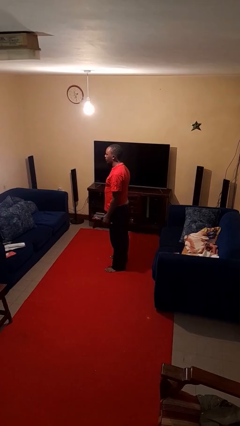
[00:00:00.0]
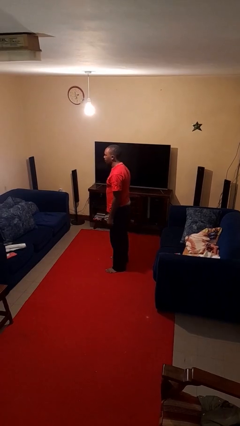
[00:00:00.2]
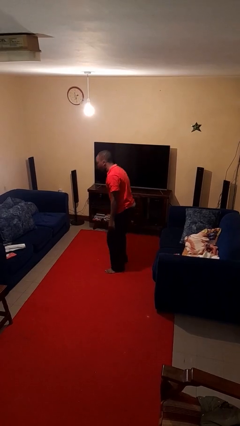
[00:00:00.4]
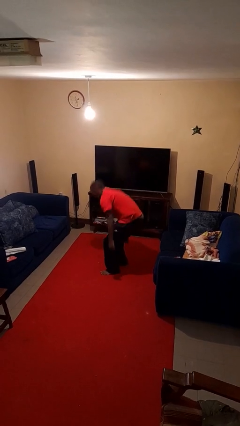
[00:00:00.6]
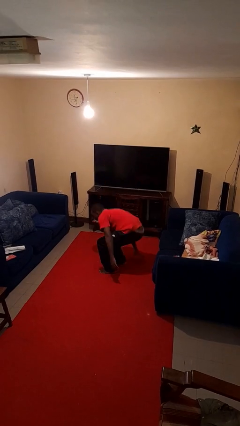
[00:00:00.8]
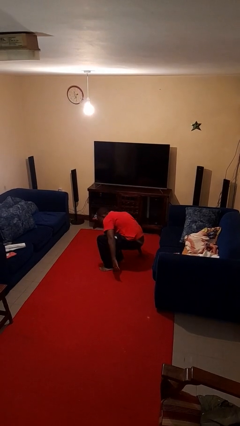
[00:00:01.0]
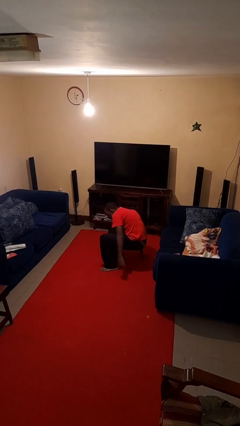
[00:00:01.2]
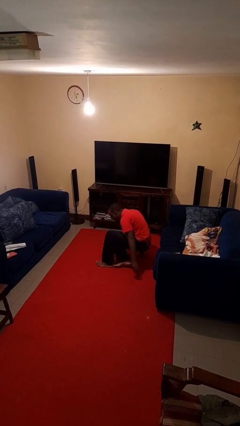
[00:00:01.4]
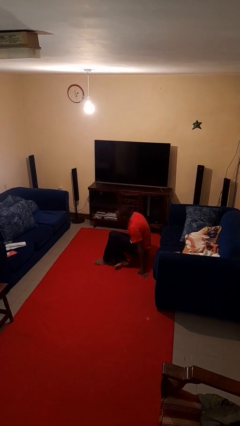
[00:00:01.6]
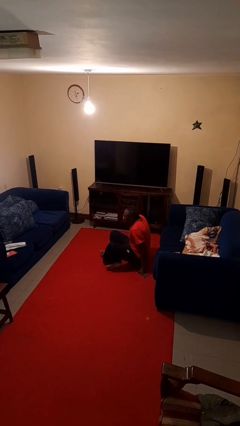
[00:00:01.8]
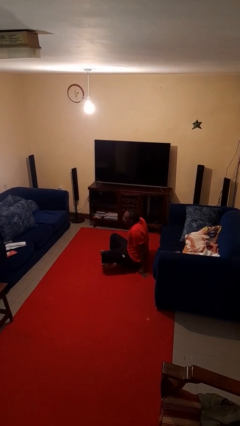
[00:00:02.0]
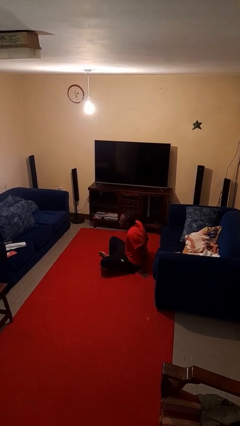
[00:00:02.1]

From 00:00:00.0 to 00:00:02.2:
person sits crisscross

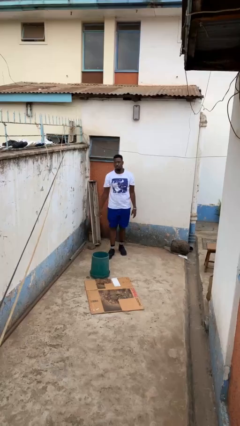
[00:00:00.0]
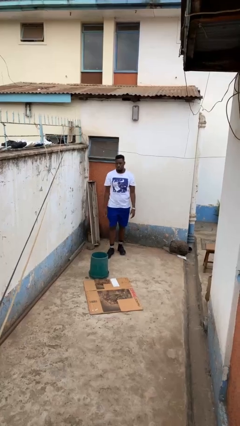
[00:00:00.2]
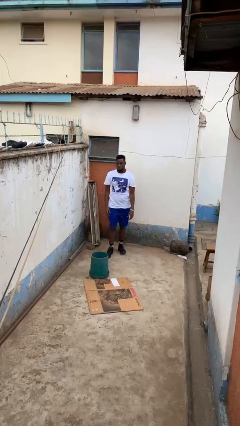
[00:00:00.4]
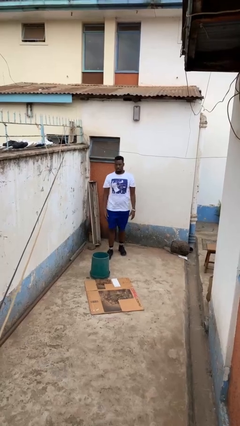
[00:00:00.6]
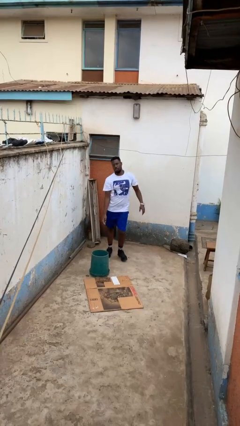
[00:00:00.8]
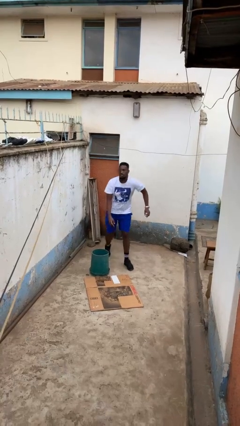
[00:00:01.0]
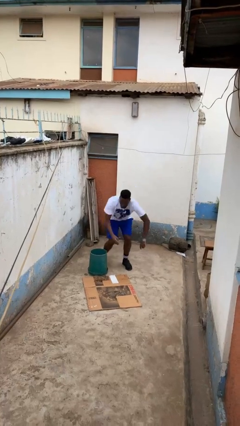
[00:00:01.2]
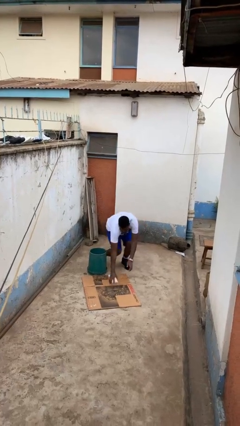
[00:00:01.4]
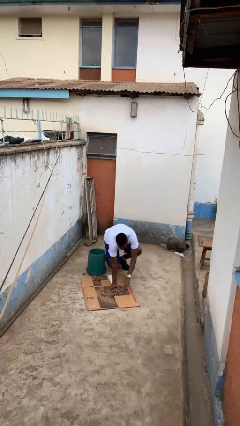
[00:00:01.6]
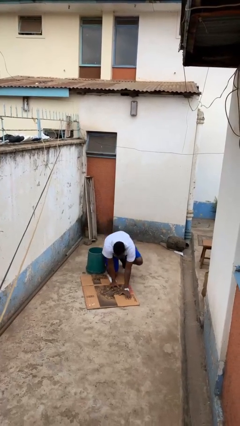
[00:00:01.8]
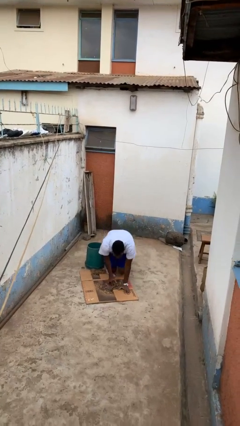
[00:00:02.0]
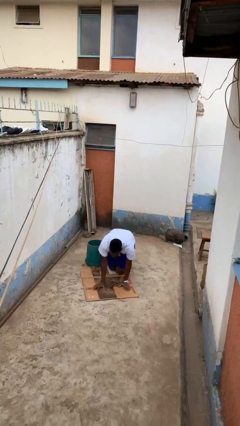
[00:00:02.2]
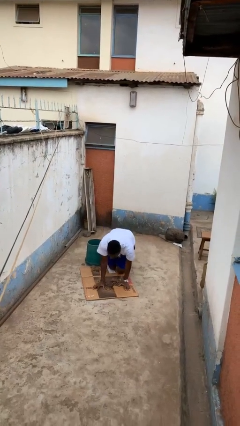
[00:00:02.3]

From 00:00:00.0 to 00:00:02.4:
person trips on object on floor

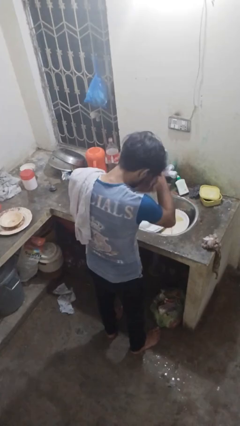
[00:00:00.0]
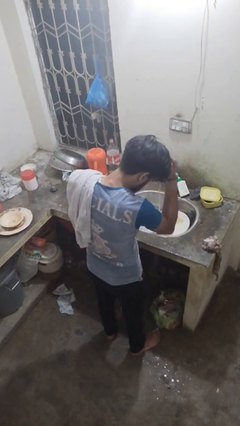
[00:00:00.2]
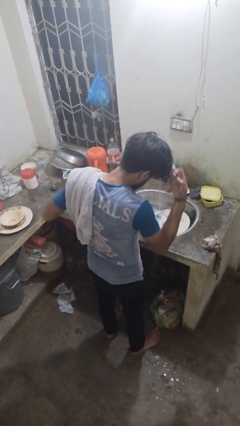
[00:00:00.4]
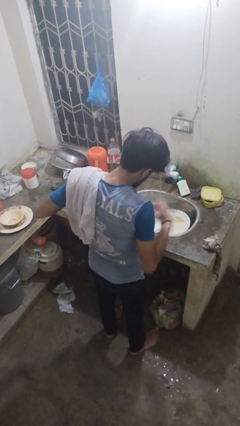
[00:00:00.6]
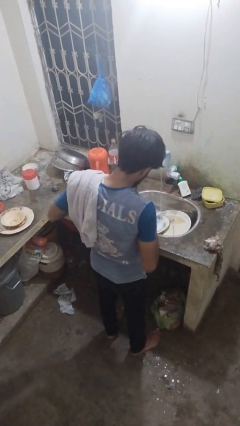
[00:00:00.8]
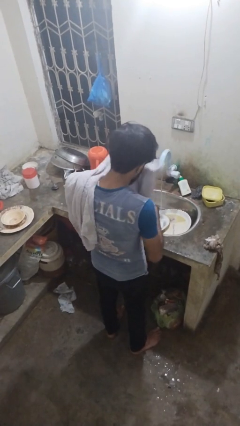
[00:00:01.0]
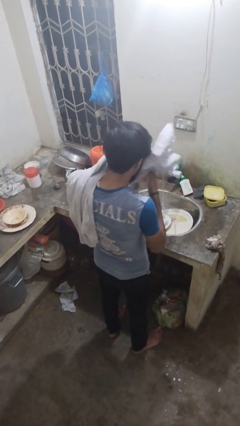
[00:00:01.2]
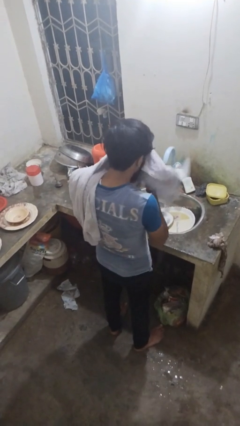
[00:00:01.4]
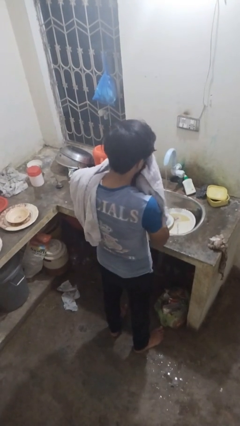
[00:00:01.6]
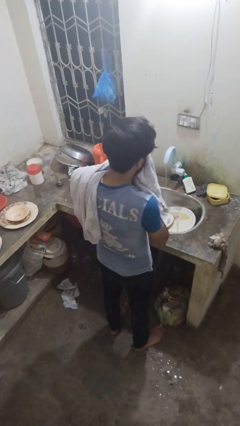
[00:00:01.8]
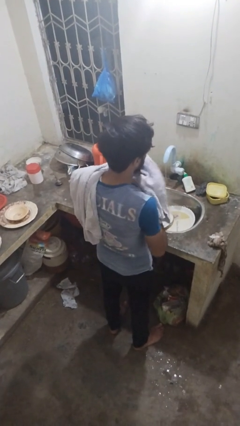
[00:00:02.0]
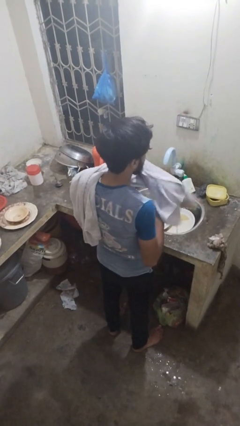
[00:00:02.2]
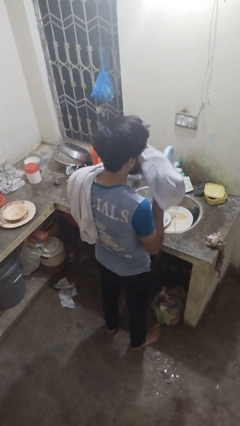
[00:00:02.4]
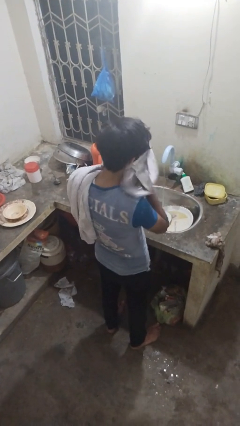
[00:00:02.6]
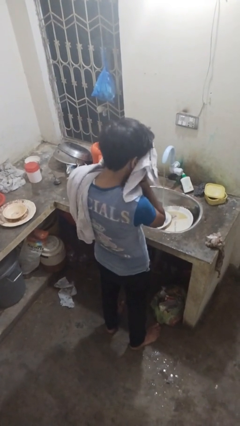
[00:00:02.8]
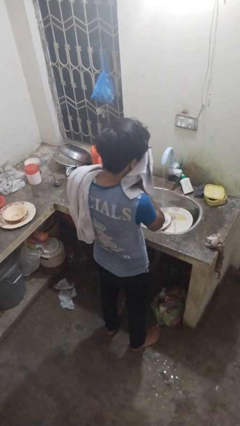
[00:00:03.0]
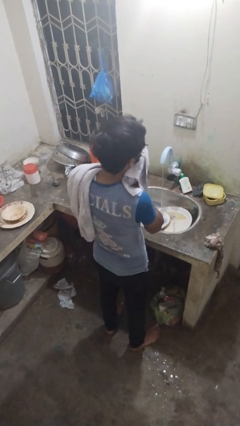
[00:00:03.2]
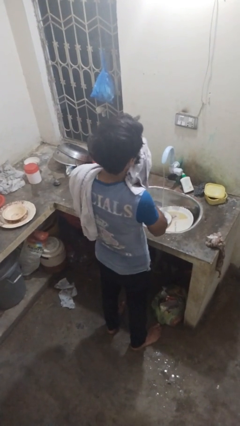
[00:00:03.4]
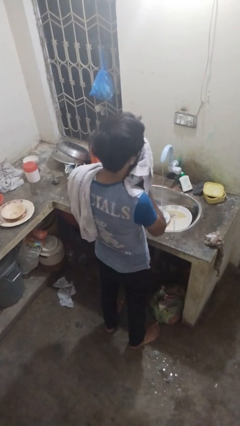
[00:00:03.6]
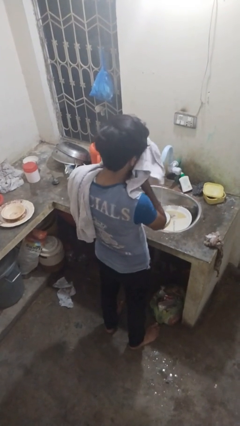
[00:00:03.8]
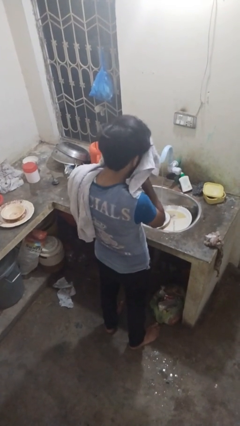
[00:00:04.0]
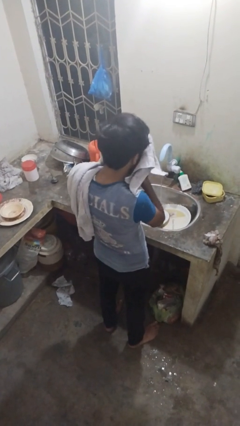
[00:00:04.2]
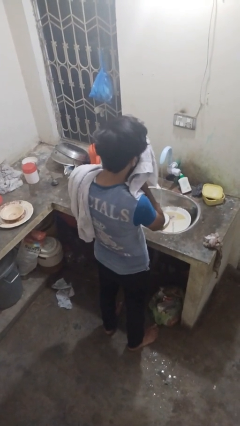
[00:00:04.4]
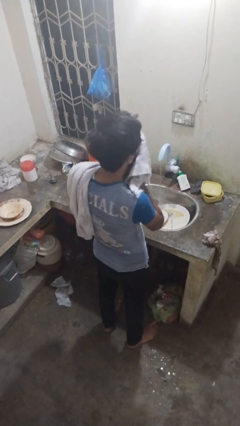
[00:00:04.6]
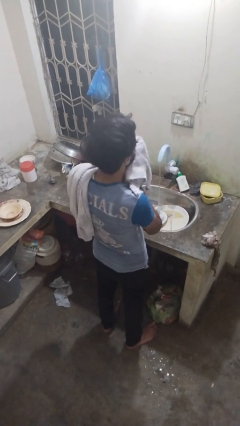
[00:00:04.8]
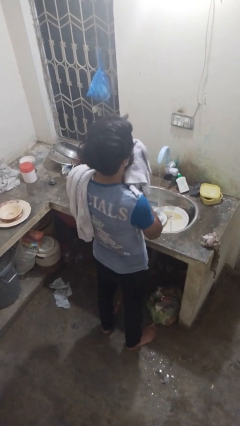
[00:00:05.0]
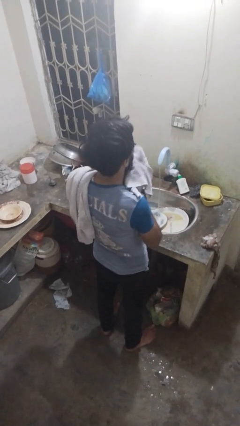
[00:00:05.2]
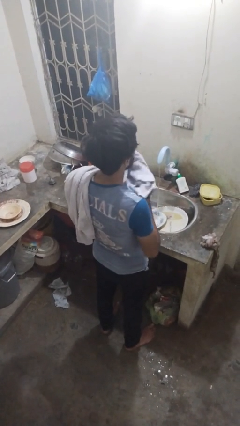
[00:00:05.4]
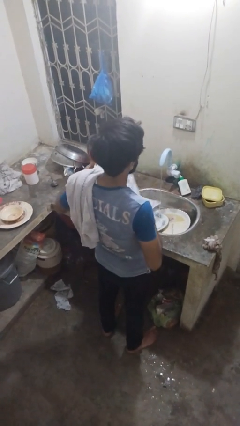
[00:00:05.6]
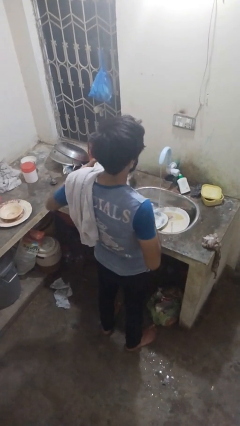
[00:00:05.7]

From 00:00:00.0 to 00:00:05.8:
person dries face with towel

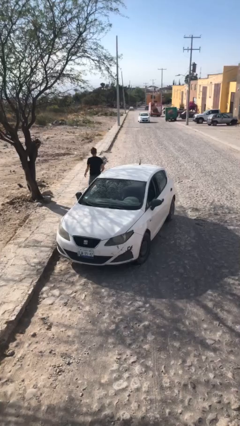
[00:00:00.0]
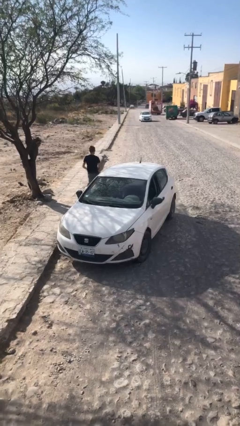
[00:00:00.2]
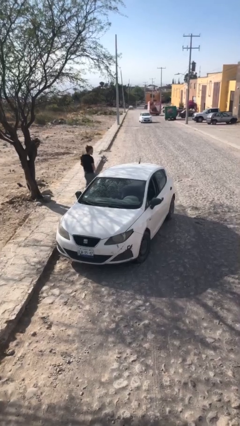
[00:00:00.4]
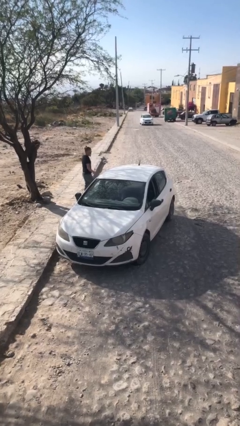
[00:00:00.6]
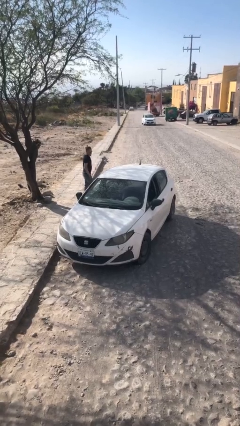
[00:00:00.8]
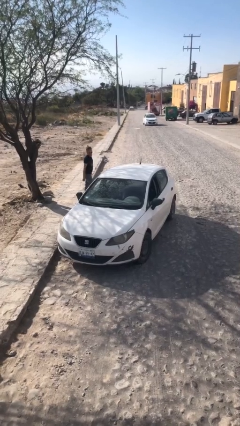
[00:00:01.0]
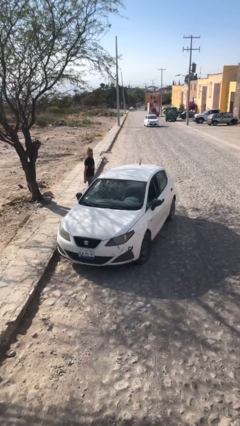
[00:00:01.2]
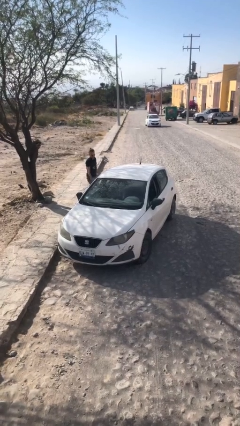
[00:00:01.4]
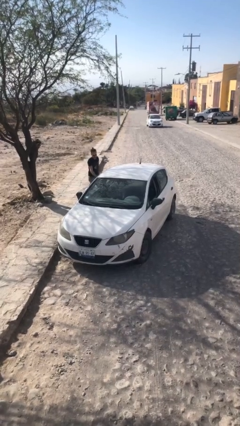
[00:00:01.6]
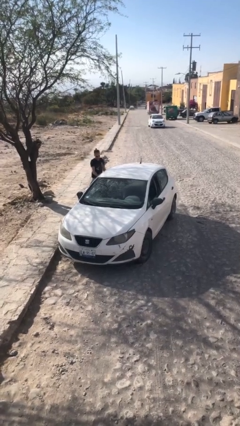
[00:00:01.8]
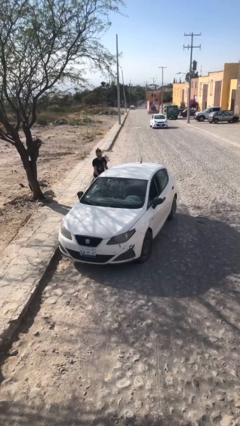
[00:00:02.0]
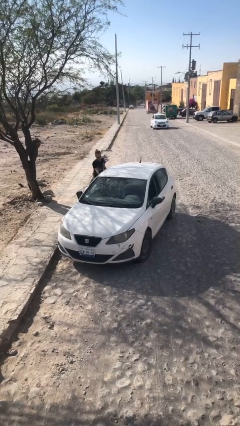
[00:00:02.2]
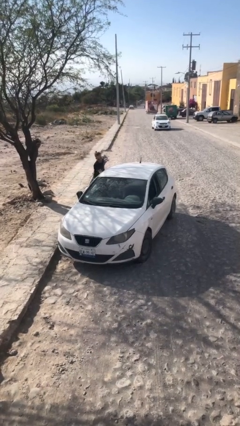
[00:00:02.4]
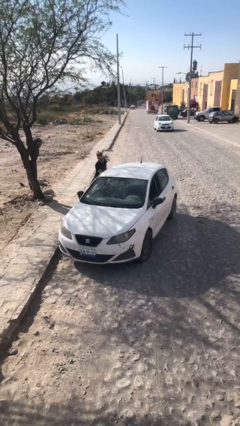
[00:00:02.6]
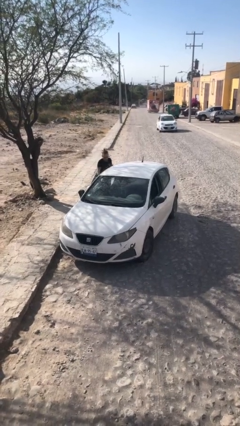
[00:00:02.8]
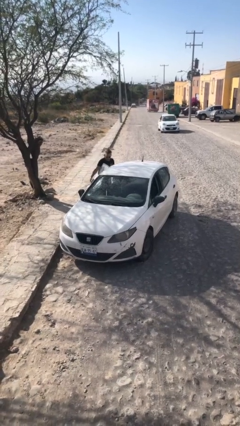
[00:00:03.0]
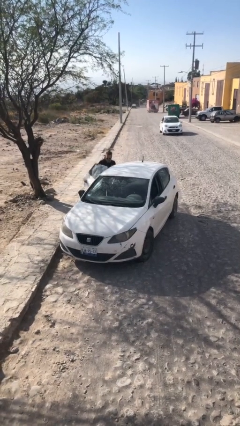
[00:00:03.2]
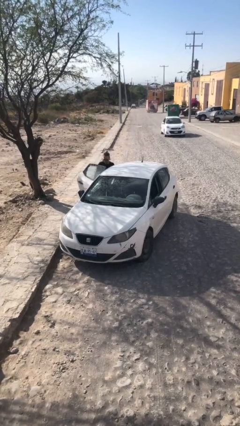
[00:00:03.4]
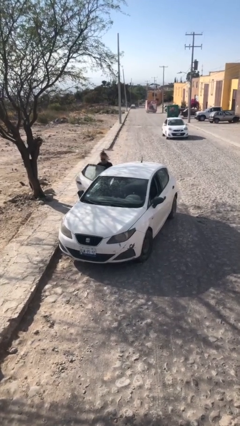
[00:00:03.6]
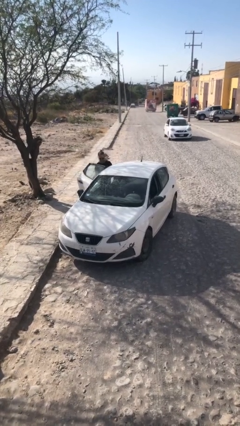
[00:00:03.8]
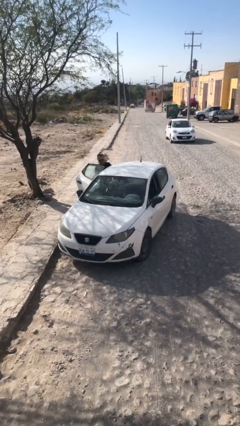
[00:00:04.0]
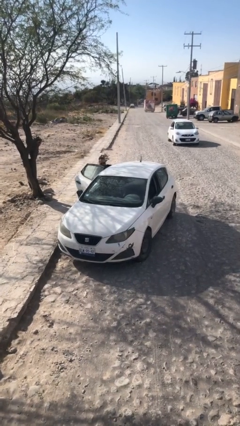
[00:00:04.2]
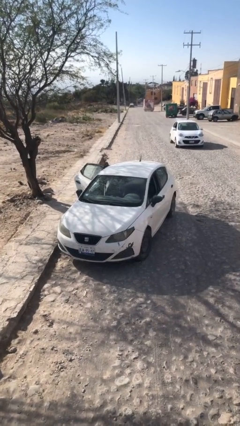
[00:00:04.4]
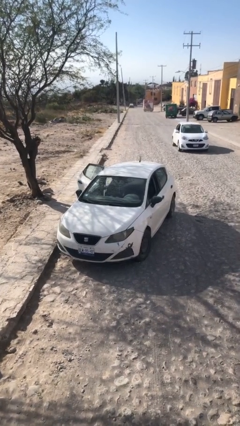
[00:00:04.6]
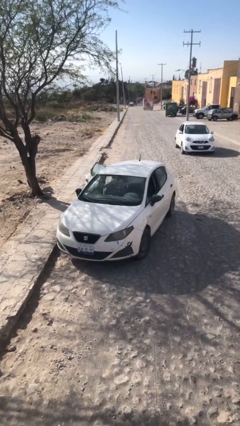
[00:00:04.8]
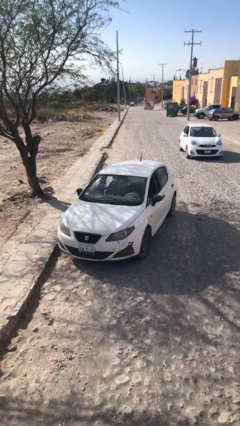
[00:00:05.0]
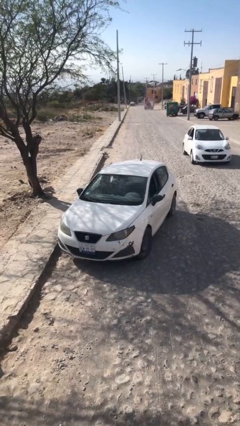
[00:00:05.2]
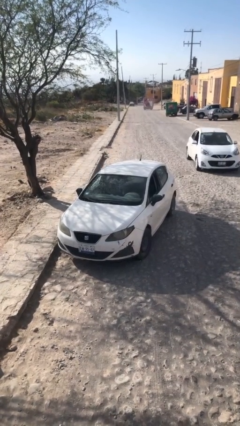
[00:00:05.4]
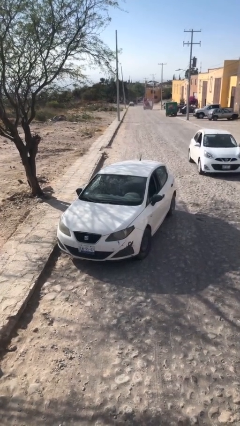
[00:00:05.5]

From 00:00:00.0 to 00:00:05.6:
car picks up person

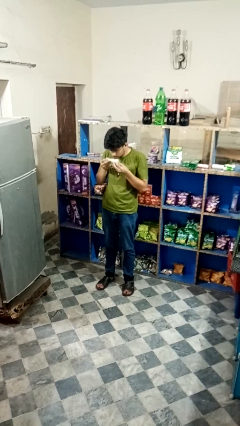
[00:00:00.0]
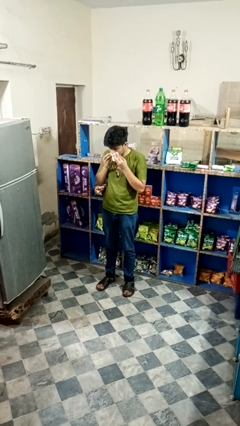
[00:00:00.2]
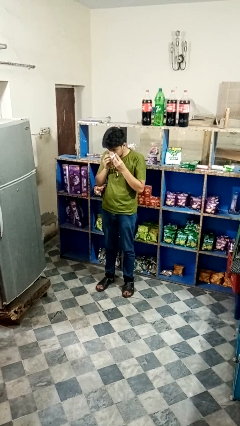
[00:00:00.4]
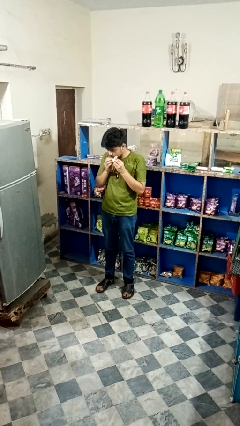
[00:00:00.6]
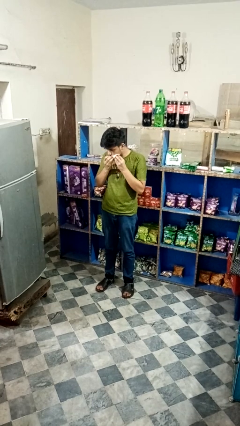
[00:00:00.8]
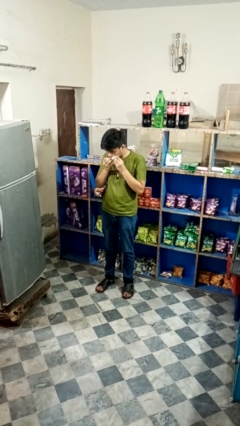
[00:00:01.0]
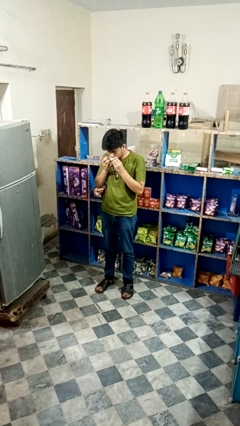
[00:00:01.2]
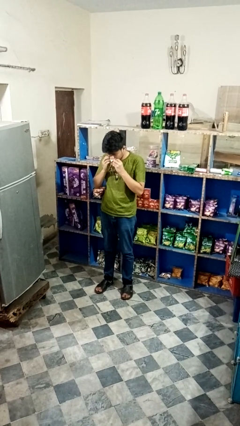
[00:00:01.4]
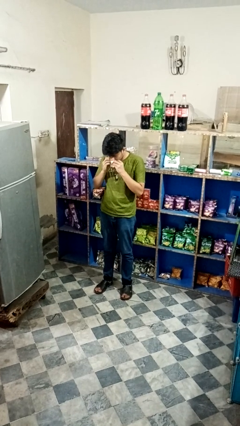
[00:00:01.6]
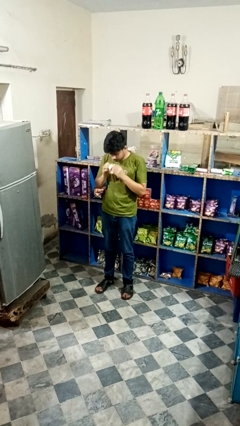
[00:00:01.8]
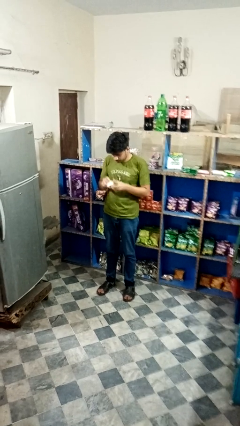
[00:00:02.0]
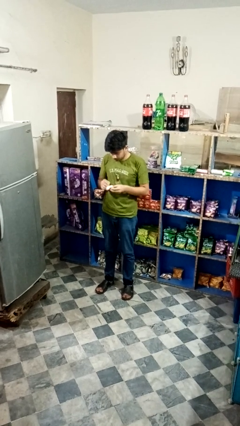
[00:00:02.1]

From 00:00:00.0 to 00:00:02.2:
person wipes mouth with napkin
